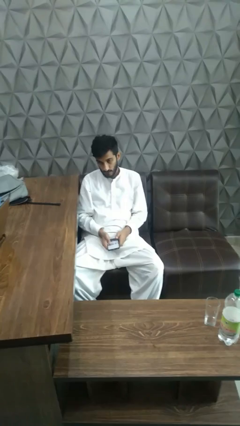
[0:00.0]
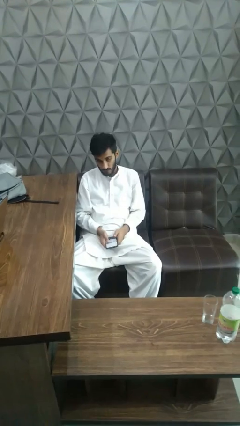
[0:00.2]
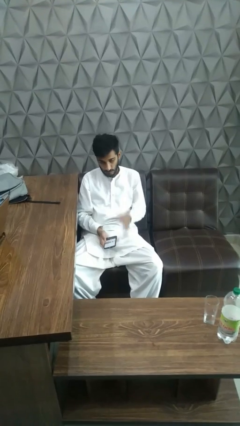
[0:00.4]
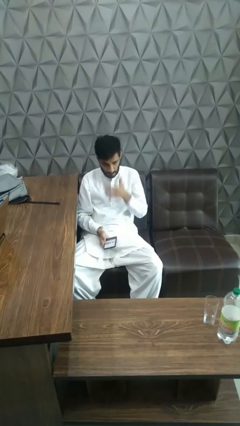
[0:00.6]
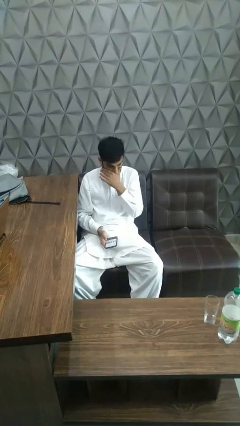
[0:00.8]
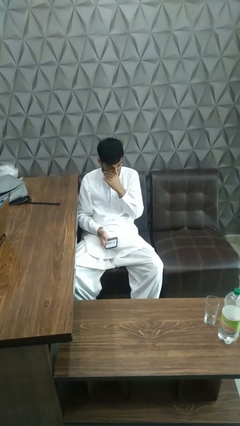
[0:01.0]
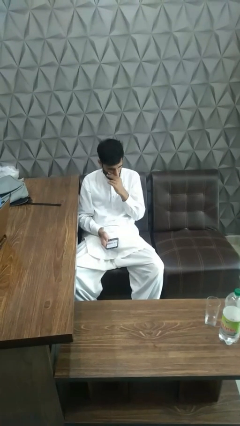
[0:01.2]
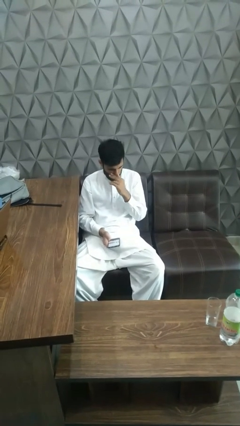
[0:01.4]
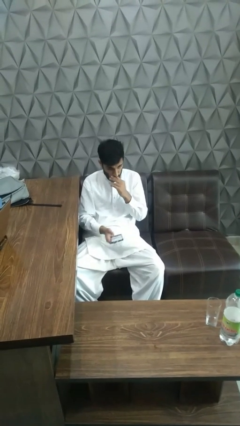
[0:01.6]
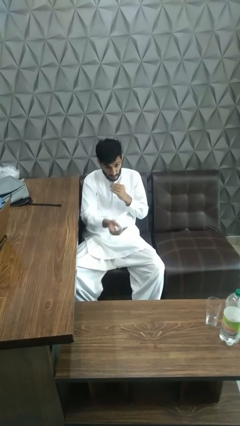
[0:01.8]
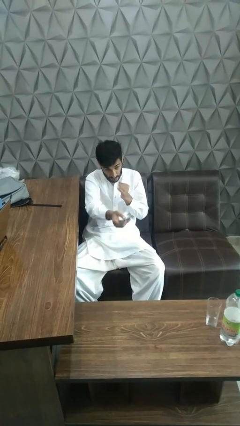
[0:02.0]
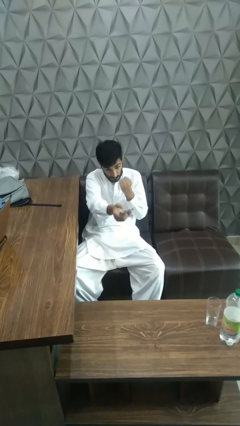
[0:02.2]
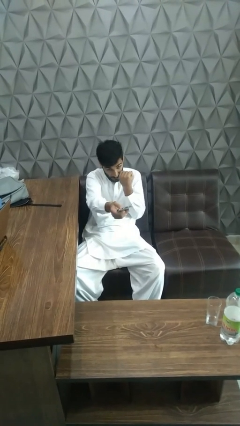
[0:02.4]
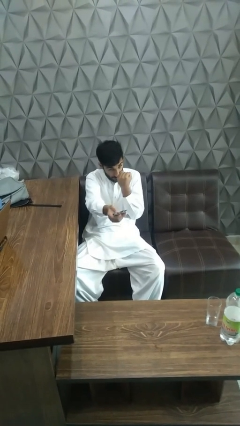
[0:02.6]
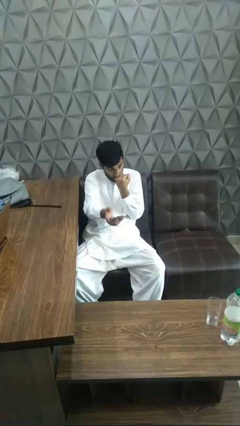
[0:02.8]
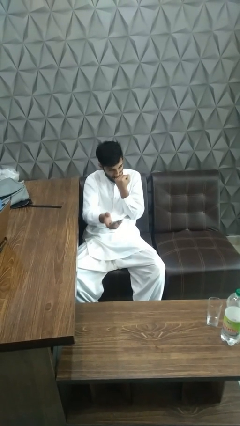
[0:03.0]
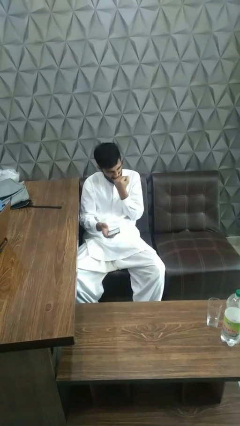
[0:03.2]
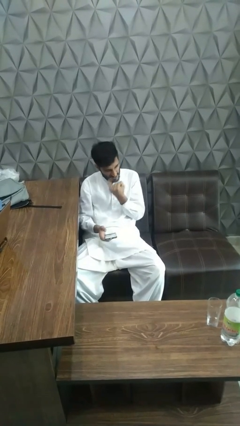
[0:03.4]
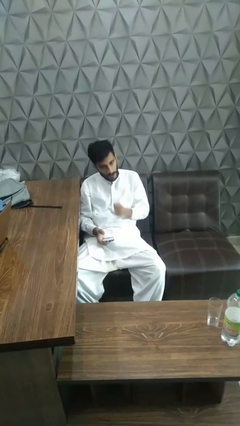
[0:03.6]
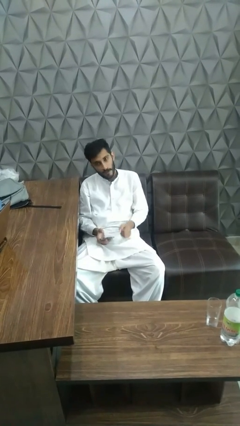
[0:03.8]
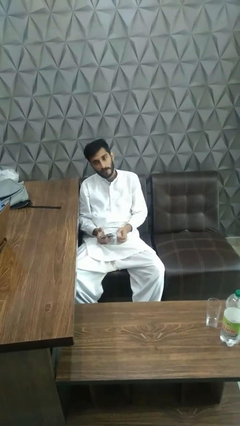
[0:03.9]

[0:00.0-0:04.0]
person uses television remote

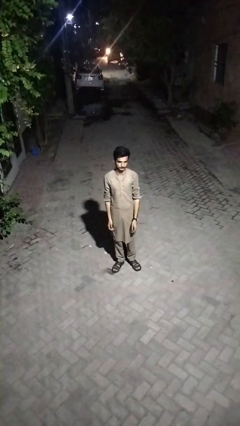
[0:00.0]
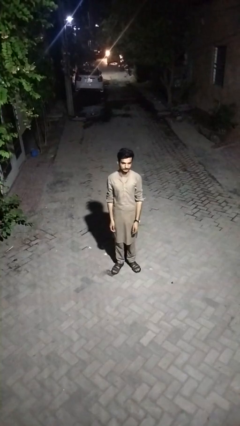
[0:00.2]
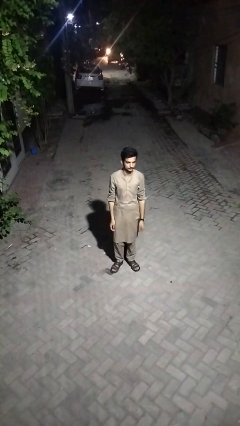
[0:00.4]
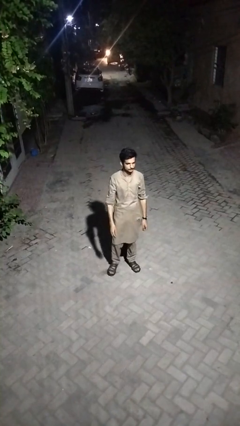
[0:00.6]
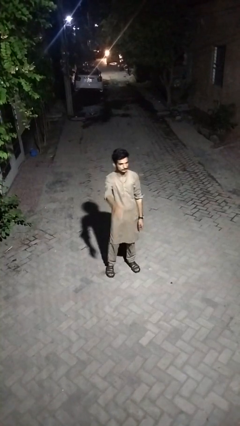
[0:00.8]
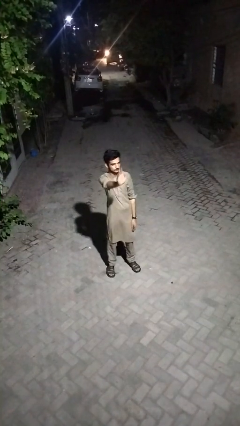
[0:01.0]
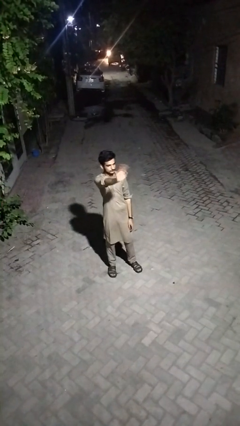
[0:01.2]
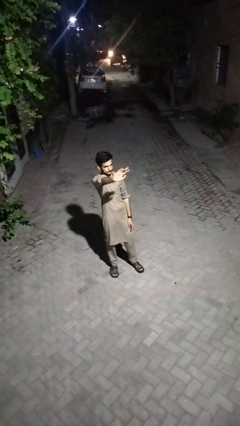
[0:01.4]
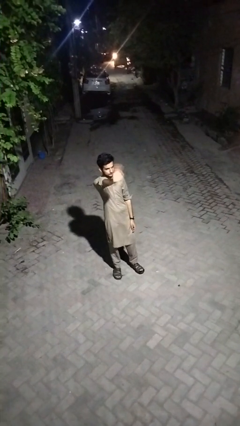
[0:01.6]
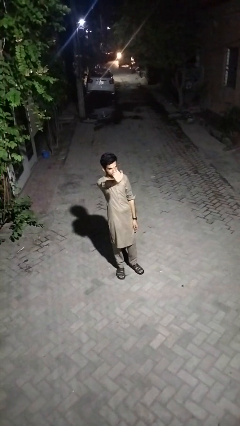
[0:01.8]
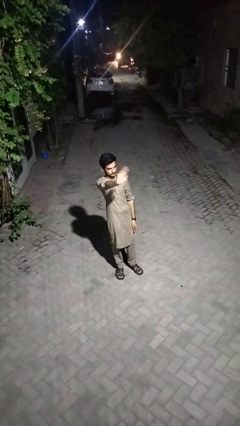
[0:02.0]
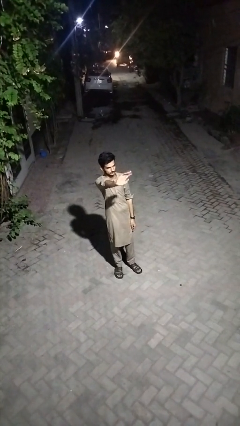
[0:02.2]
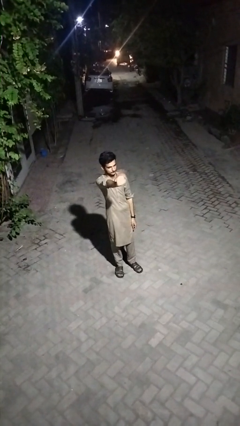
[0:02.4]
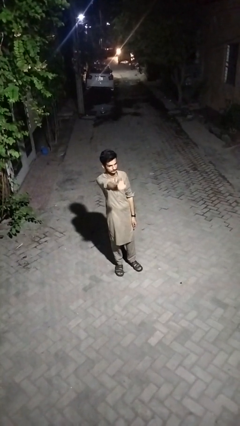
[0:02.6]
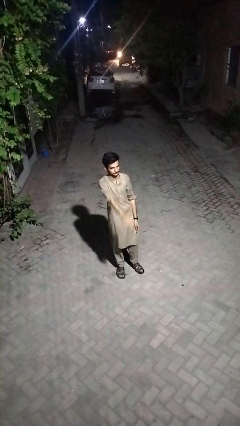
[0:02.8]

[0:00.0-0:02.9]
person waves at person

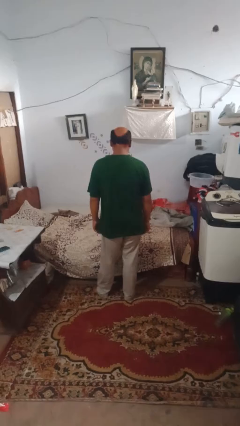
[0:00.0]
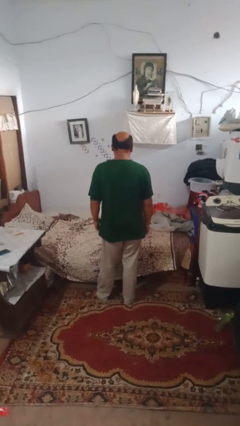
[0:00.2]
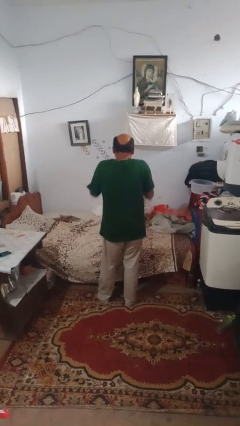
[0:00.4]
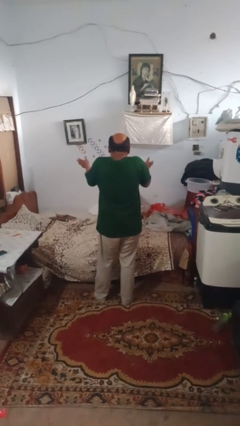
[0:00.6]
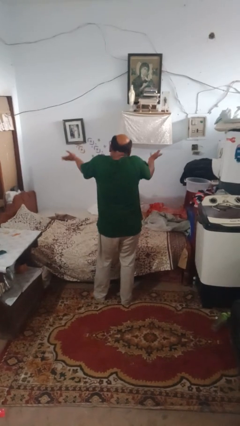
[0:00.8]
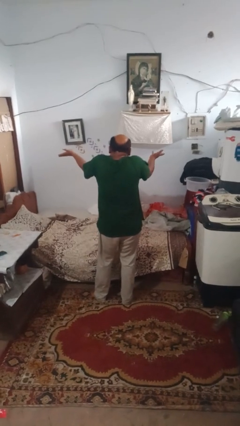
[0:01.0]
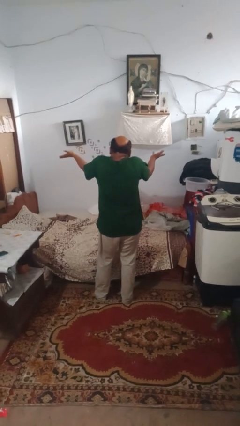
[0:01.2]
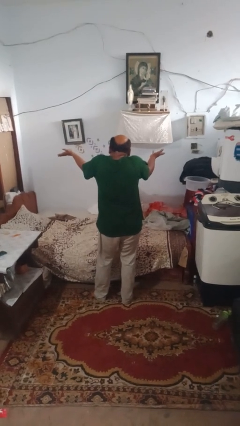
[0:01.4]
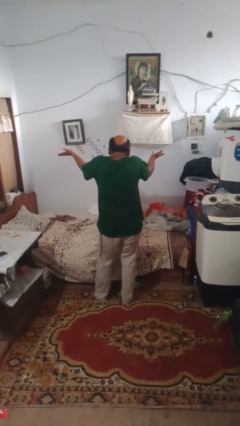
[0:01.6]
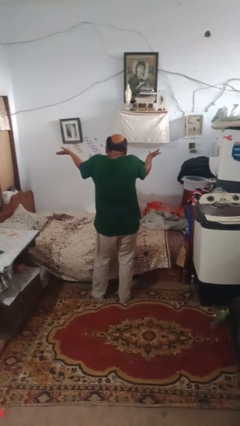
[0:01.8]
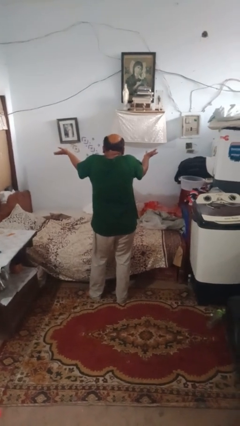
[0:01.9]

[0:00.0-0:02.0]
person shrugs

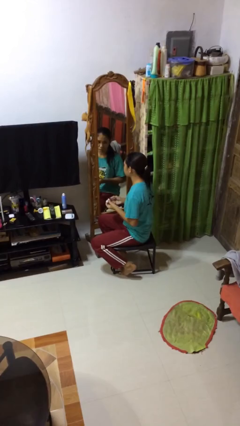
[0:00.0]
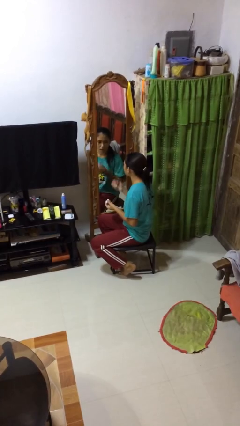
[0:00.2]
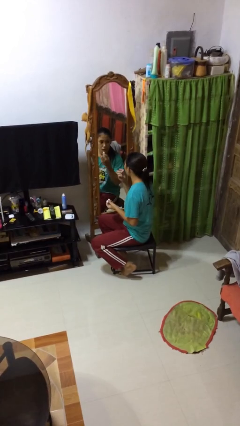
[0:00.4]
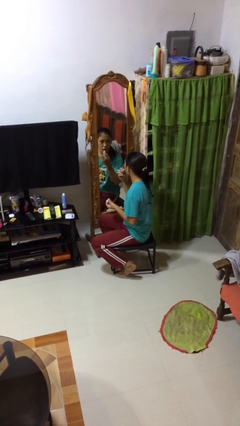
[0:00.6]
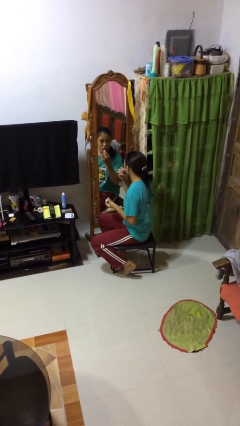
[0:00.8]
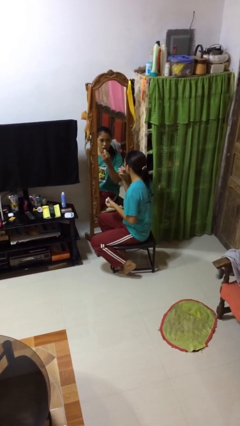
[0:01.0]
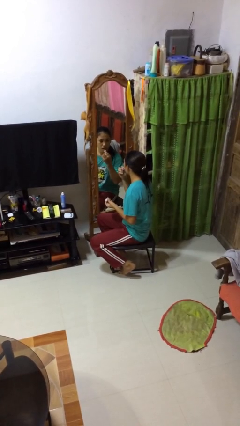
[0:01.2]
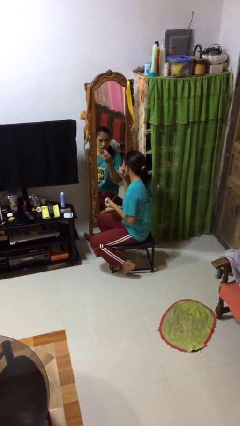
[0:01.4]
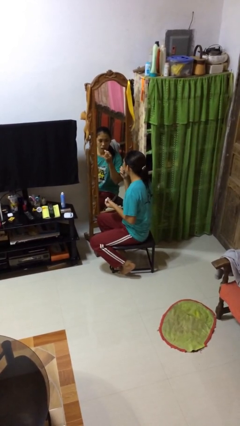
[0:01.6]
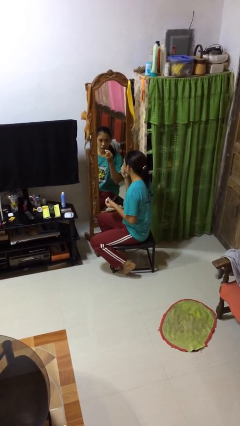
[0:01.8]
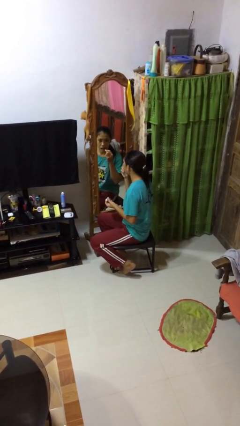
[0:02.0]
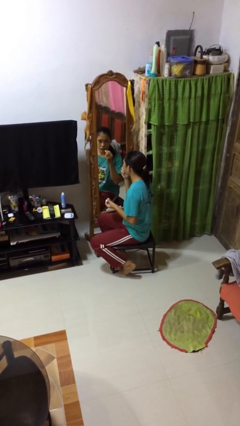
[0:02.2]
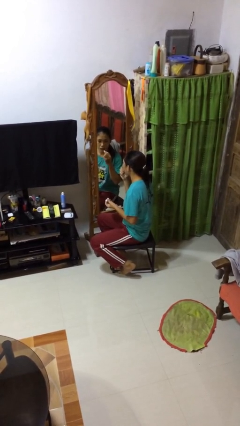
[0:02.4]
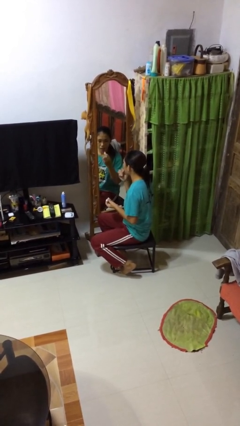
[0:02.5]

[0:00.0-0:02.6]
person applies lip makeup

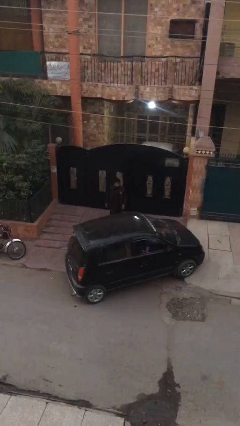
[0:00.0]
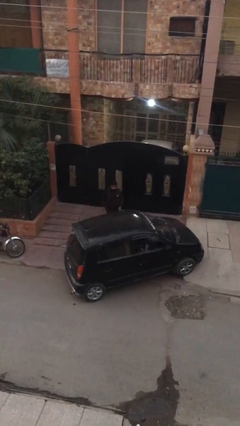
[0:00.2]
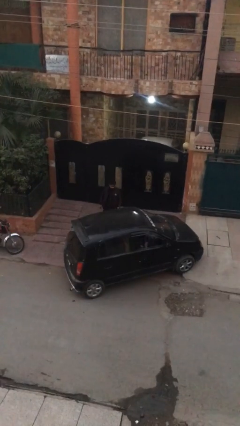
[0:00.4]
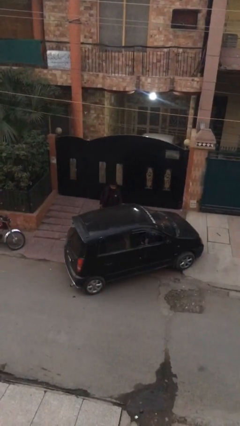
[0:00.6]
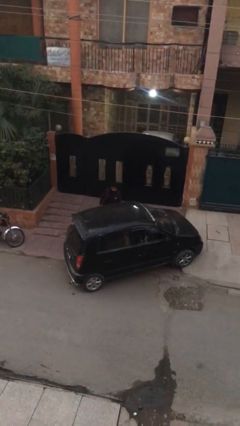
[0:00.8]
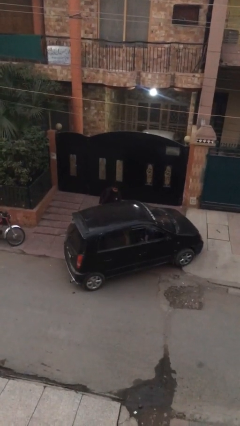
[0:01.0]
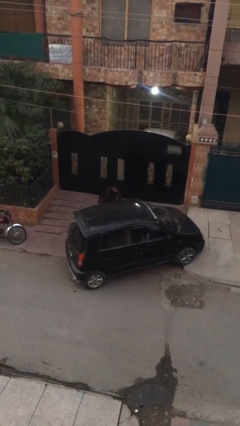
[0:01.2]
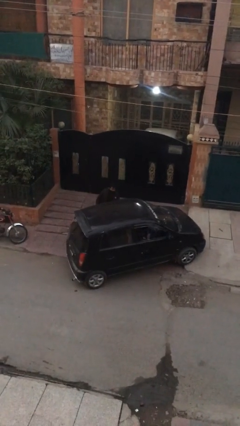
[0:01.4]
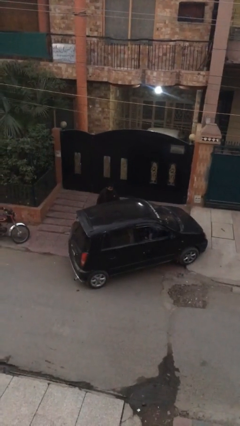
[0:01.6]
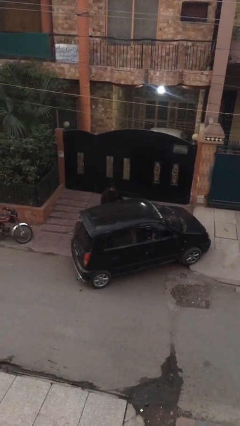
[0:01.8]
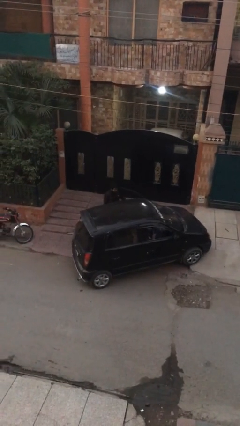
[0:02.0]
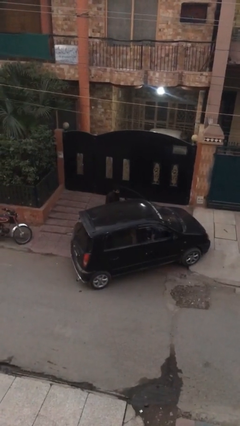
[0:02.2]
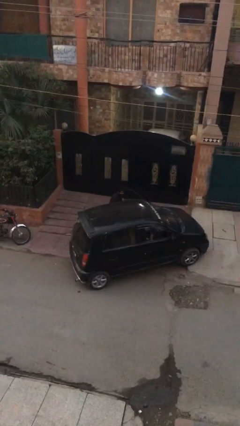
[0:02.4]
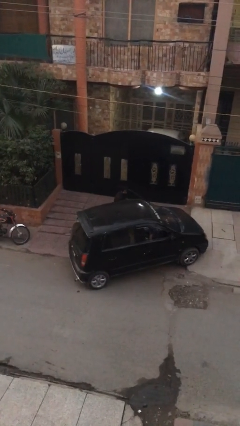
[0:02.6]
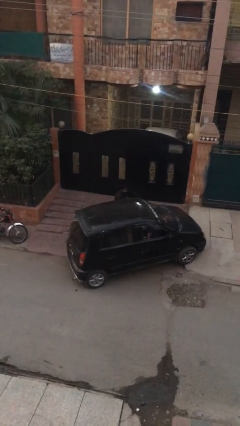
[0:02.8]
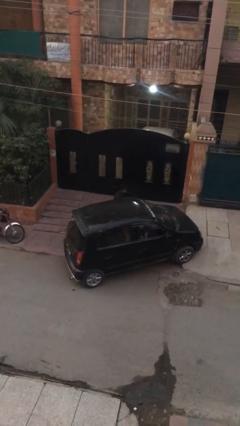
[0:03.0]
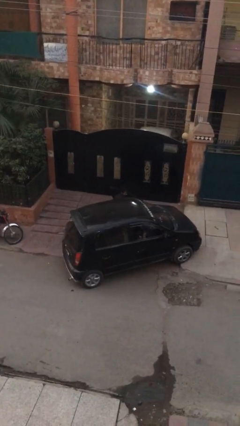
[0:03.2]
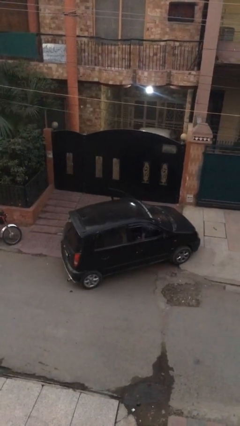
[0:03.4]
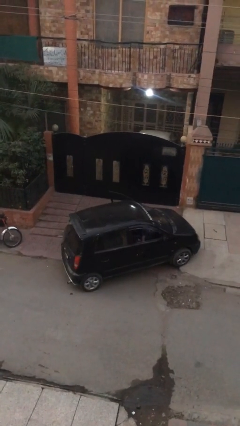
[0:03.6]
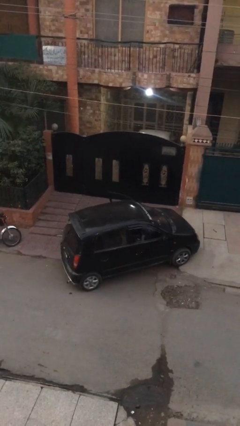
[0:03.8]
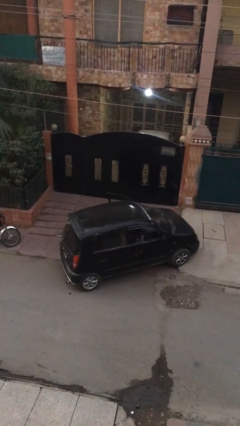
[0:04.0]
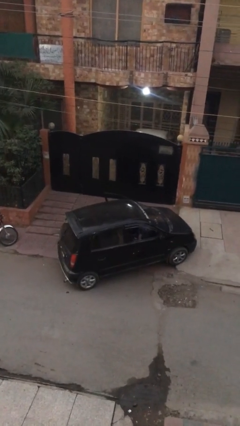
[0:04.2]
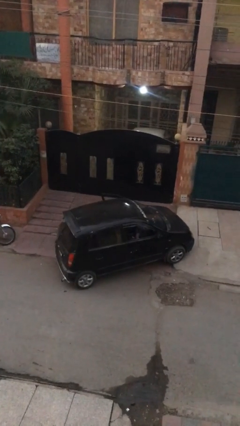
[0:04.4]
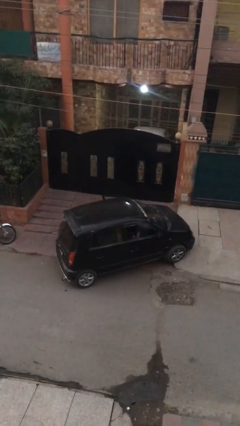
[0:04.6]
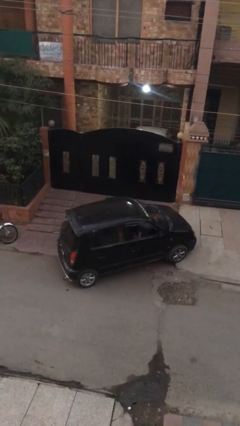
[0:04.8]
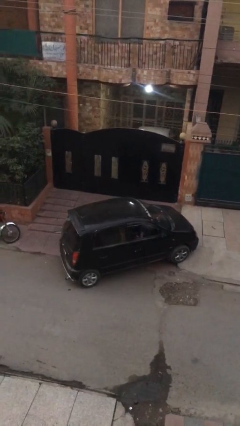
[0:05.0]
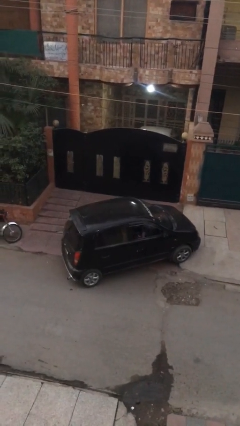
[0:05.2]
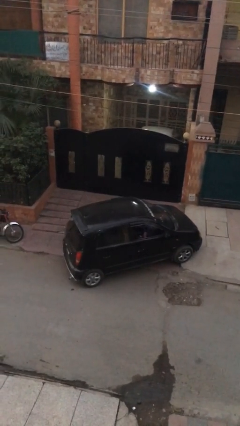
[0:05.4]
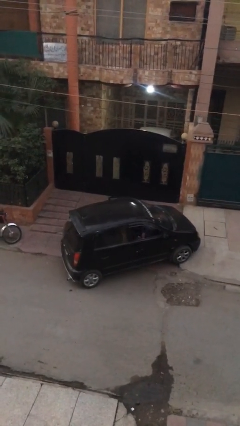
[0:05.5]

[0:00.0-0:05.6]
car picks up person

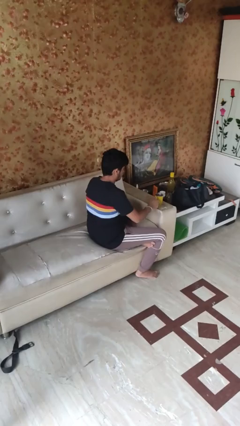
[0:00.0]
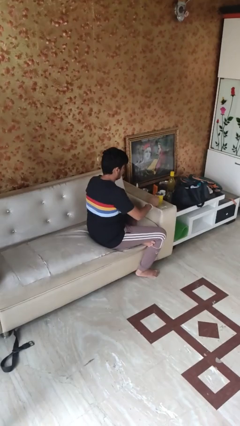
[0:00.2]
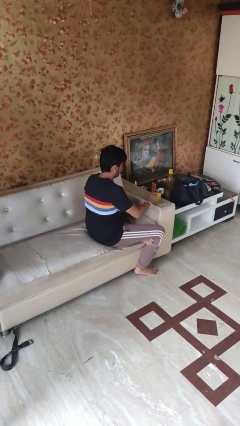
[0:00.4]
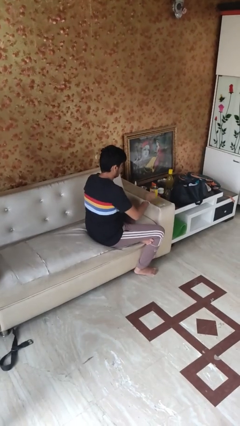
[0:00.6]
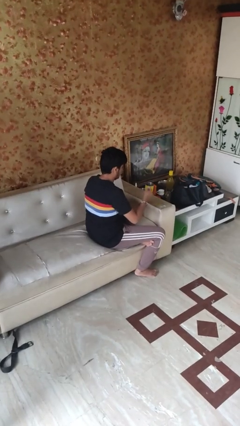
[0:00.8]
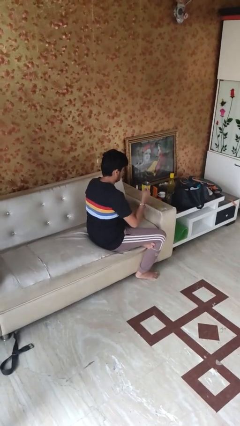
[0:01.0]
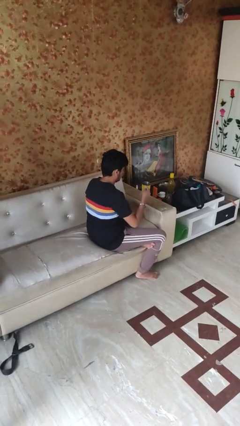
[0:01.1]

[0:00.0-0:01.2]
person picks up object from table
